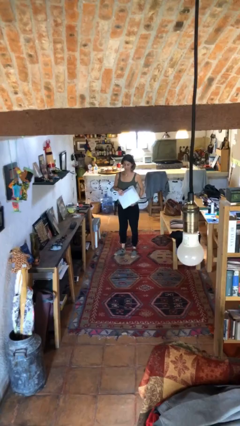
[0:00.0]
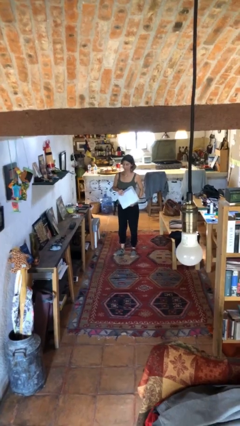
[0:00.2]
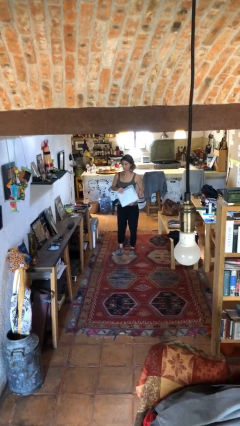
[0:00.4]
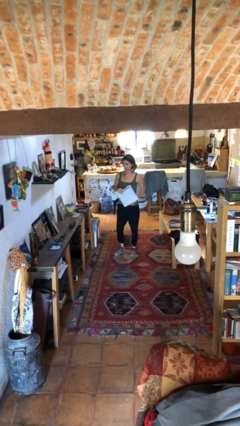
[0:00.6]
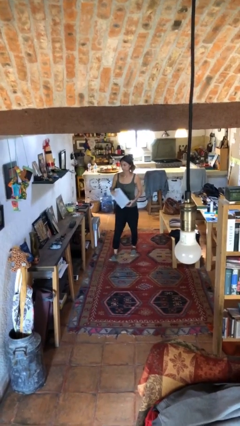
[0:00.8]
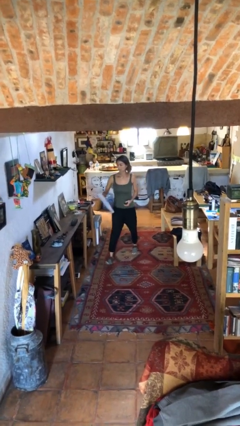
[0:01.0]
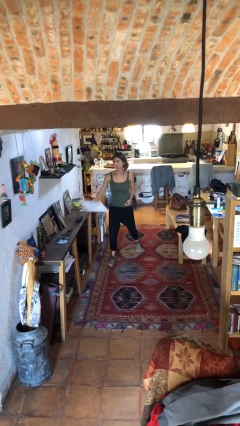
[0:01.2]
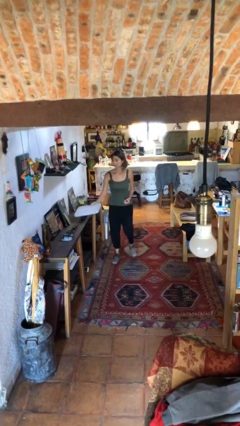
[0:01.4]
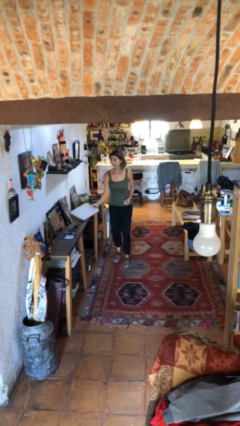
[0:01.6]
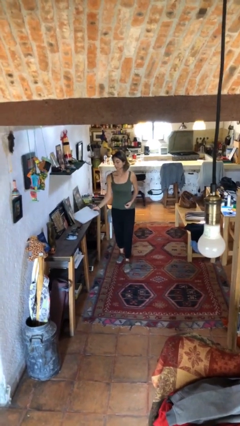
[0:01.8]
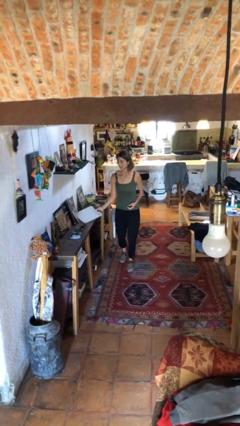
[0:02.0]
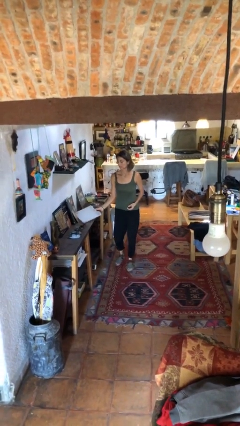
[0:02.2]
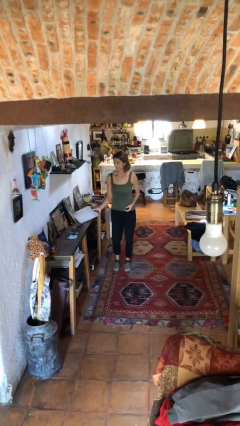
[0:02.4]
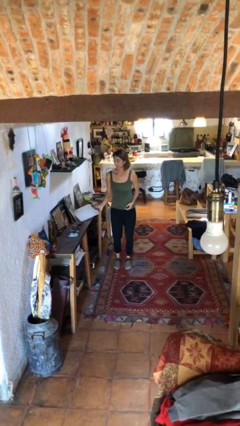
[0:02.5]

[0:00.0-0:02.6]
person puts down object on table

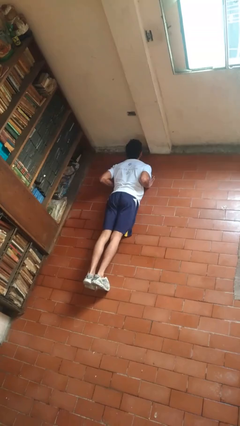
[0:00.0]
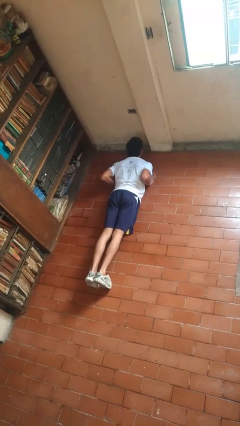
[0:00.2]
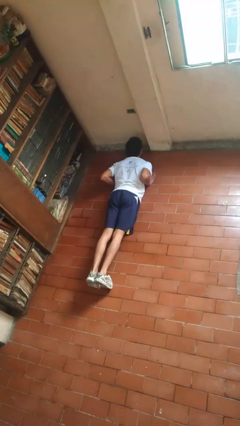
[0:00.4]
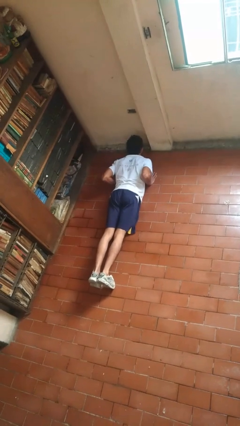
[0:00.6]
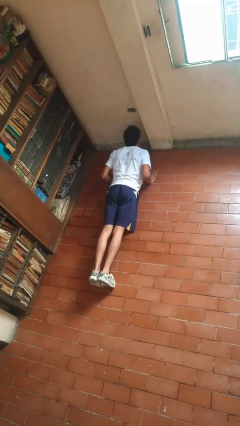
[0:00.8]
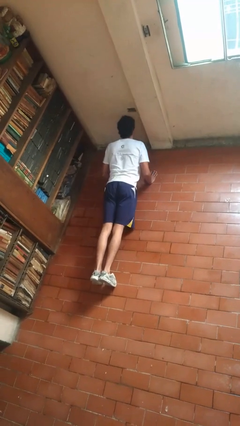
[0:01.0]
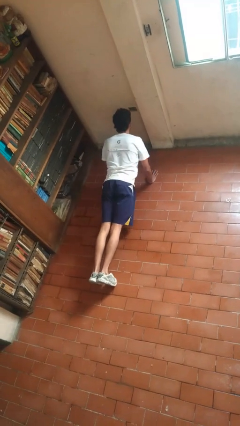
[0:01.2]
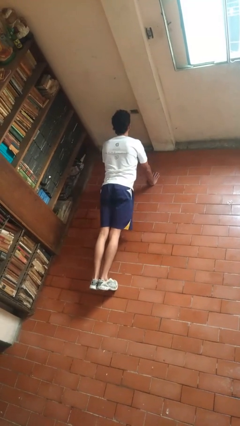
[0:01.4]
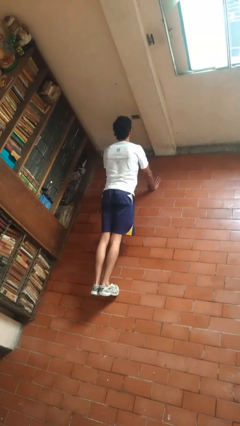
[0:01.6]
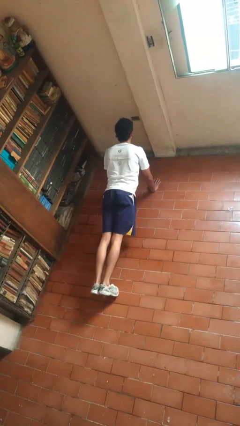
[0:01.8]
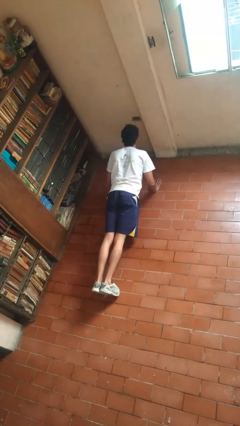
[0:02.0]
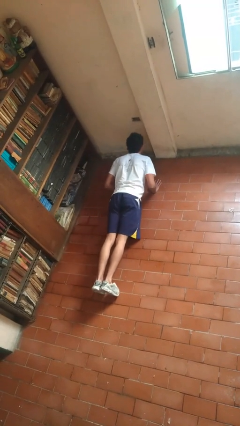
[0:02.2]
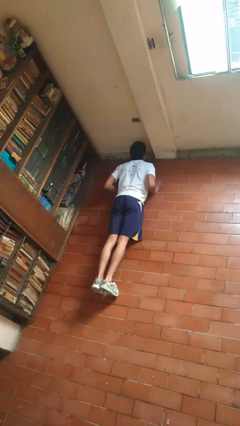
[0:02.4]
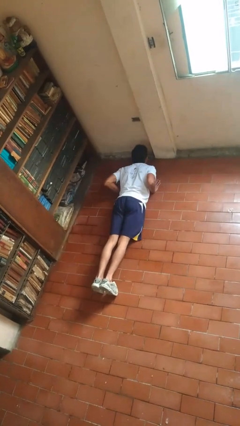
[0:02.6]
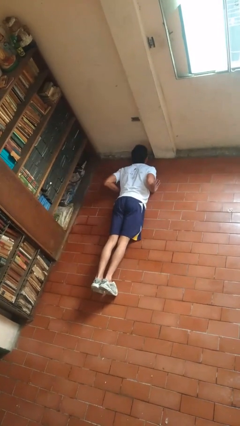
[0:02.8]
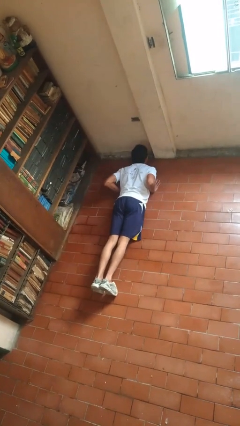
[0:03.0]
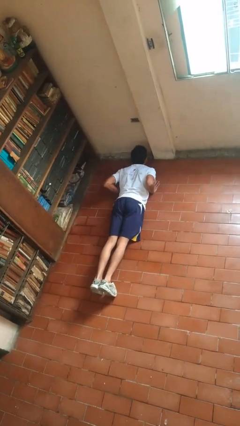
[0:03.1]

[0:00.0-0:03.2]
person exercises with pushup

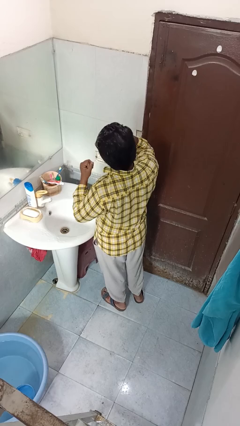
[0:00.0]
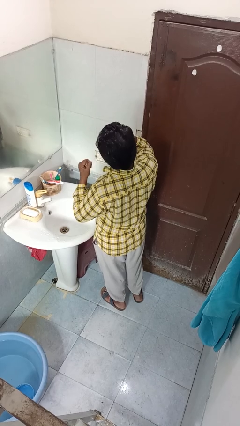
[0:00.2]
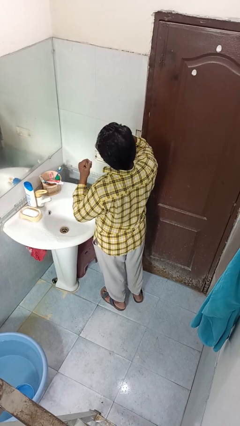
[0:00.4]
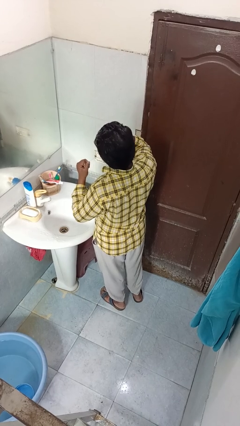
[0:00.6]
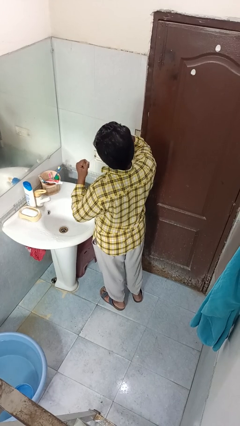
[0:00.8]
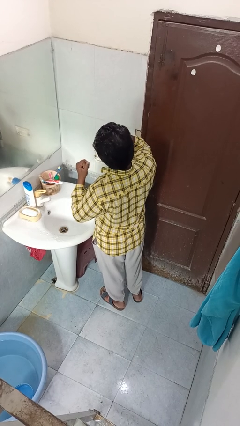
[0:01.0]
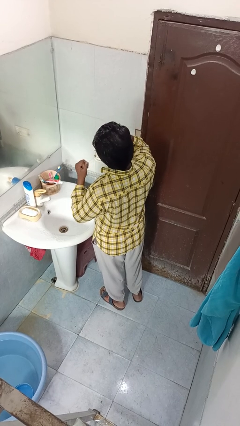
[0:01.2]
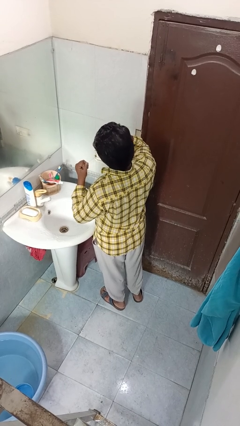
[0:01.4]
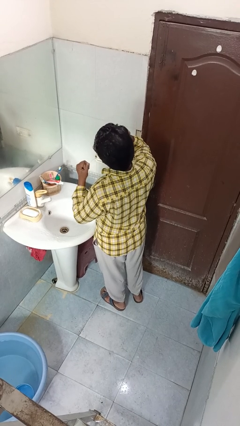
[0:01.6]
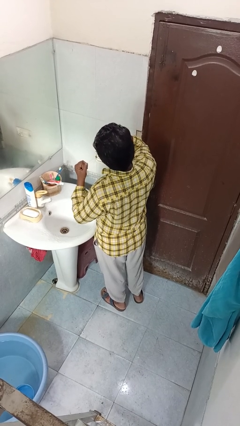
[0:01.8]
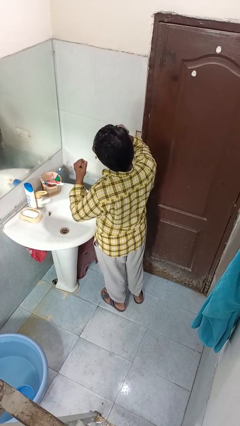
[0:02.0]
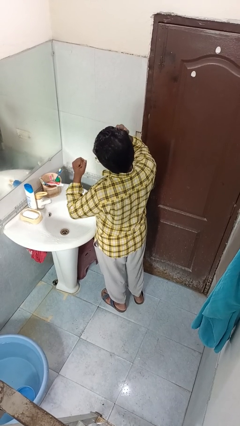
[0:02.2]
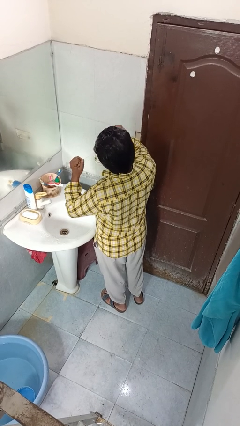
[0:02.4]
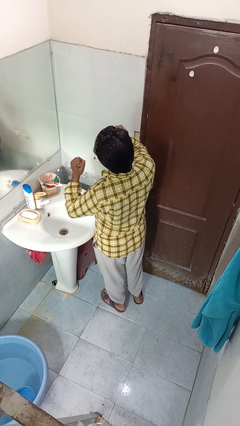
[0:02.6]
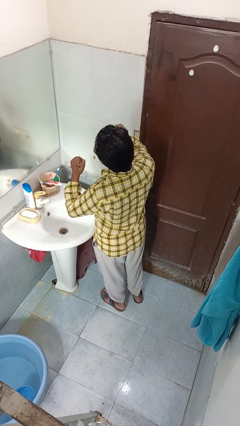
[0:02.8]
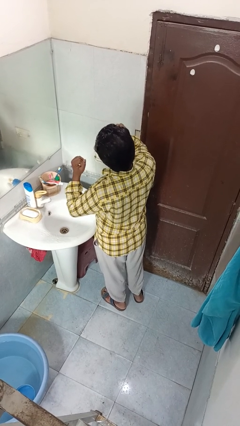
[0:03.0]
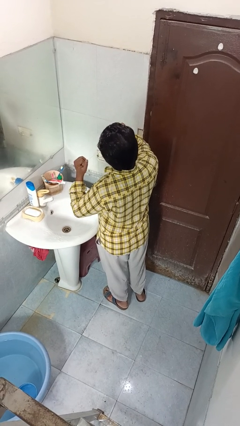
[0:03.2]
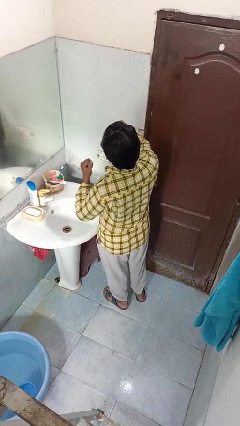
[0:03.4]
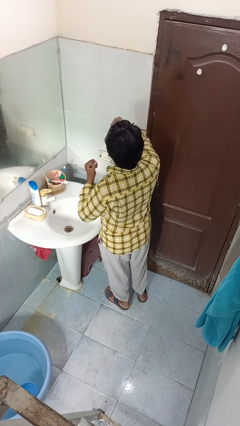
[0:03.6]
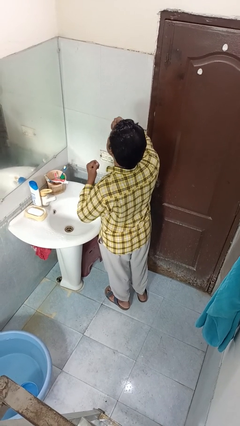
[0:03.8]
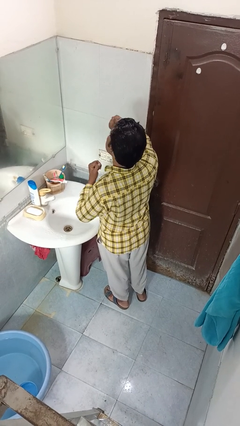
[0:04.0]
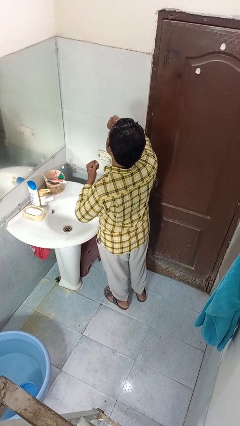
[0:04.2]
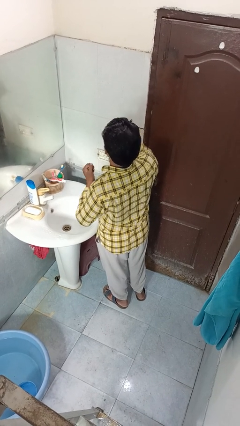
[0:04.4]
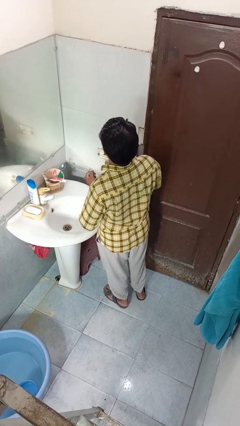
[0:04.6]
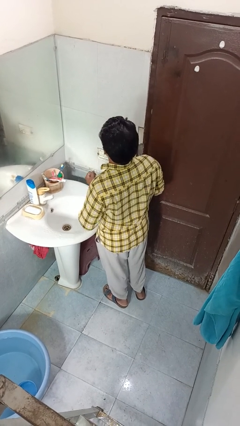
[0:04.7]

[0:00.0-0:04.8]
person flosses

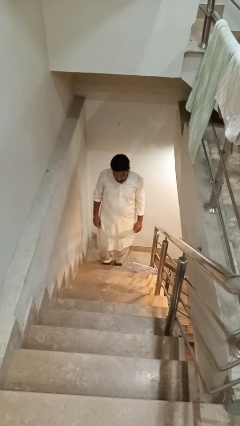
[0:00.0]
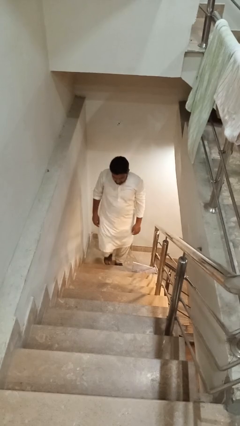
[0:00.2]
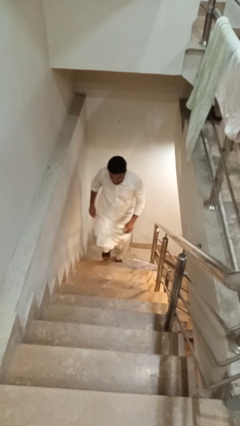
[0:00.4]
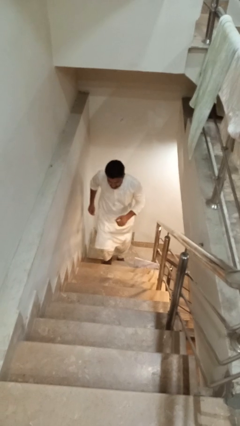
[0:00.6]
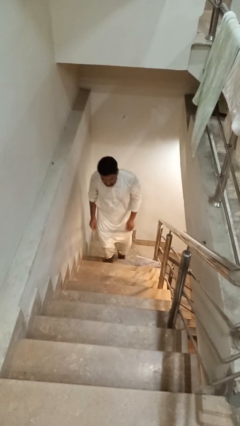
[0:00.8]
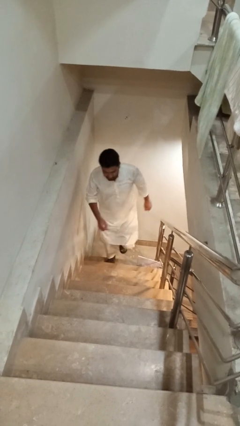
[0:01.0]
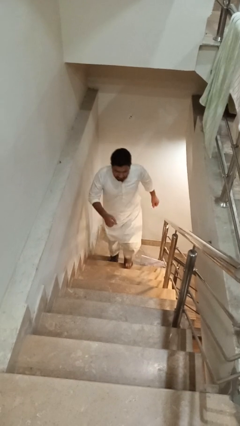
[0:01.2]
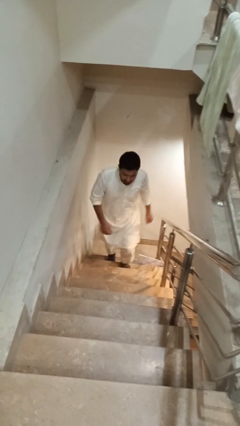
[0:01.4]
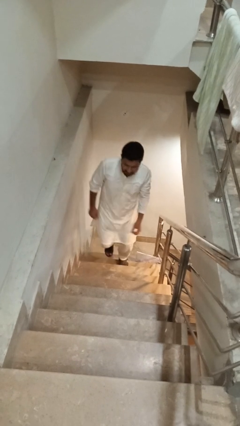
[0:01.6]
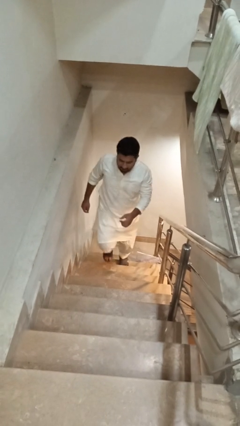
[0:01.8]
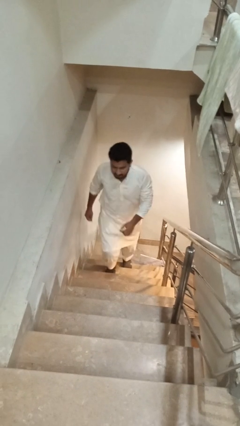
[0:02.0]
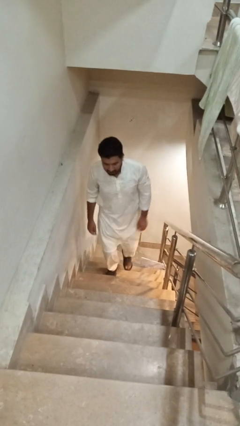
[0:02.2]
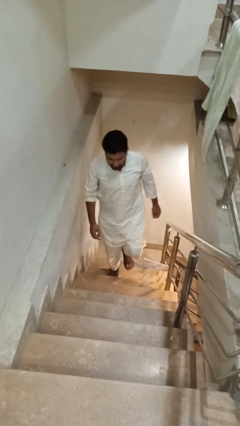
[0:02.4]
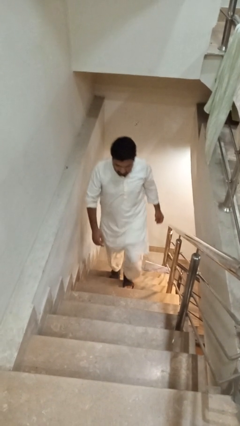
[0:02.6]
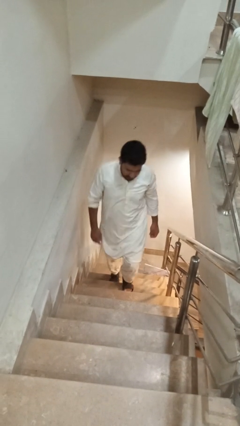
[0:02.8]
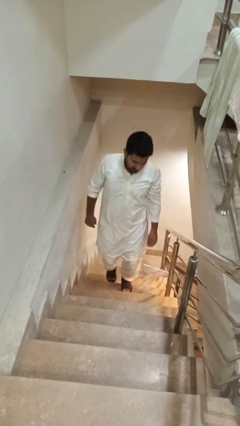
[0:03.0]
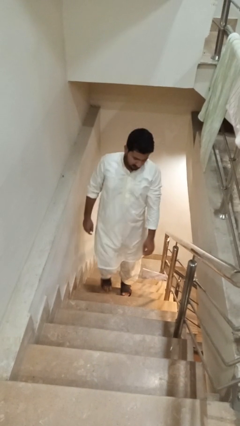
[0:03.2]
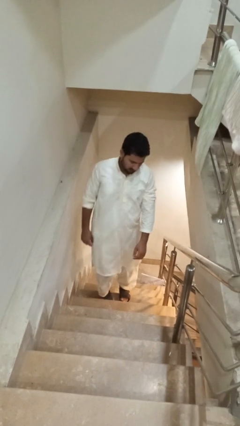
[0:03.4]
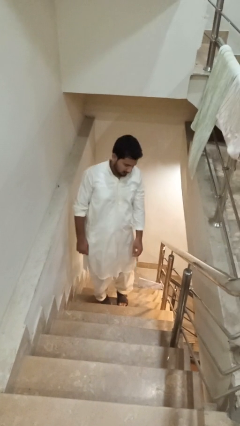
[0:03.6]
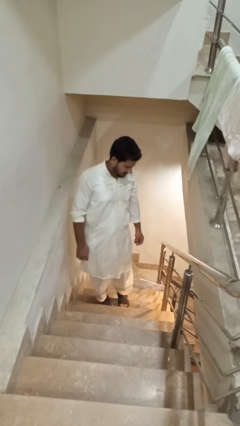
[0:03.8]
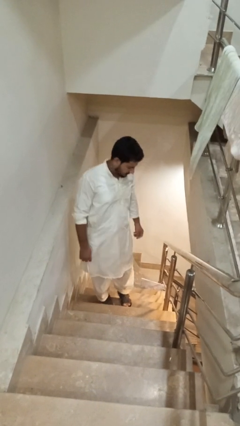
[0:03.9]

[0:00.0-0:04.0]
person climbs up stairs

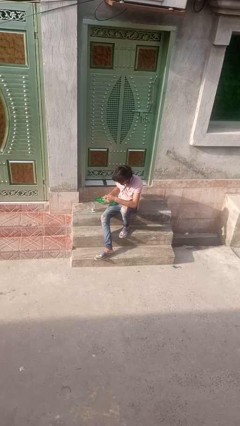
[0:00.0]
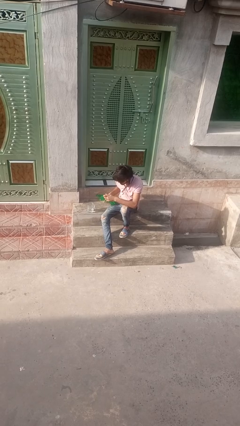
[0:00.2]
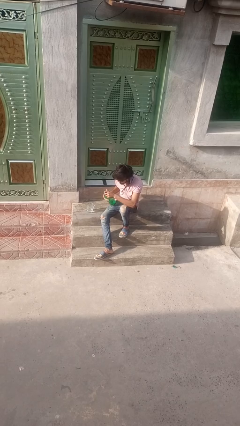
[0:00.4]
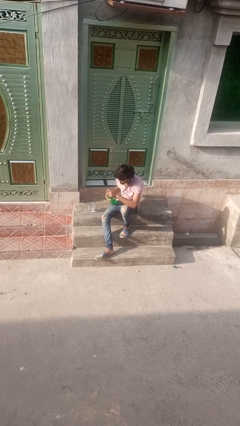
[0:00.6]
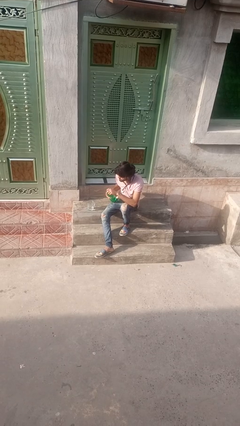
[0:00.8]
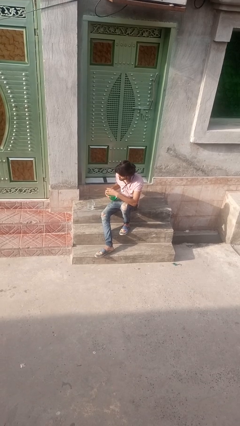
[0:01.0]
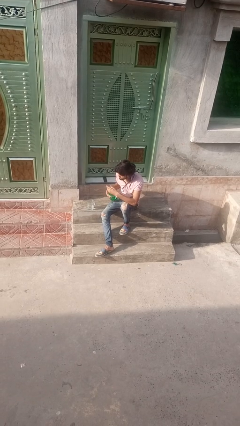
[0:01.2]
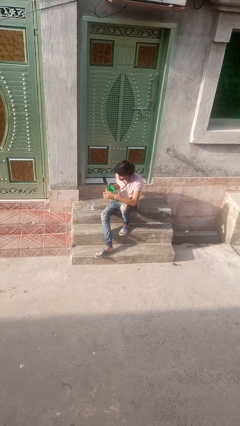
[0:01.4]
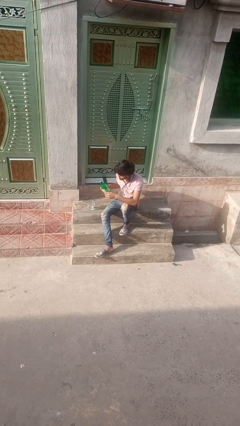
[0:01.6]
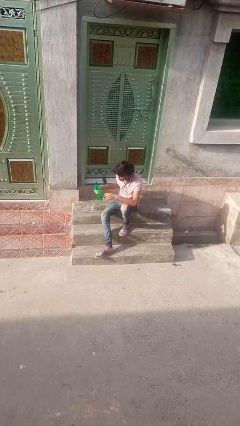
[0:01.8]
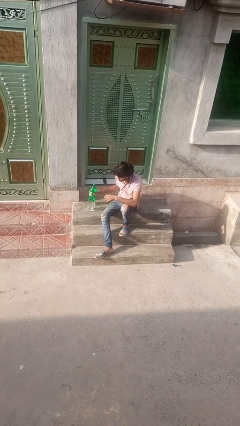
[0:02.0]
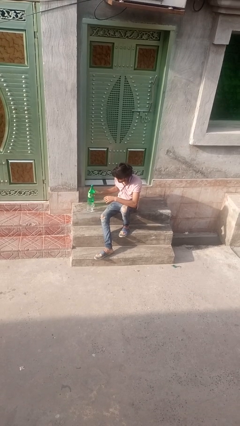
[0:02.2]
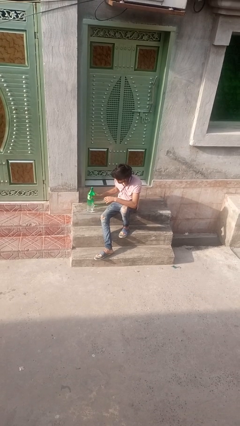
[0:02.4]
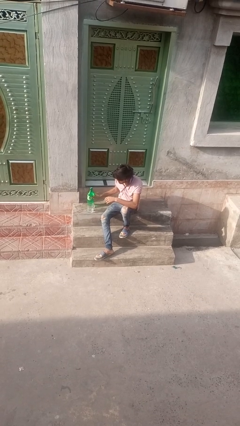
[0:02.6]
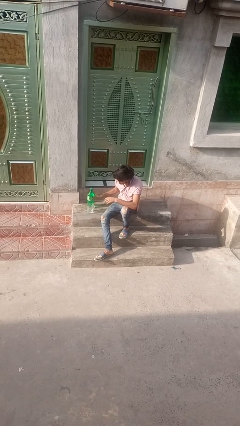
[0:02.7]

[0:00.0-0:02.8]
person screws lid to bottle

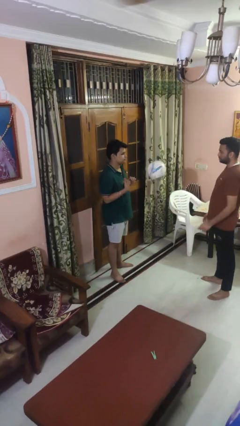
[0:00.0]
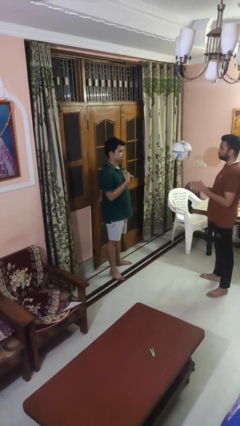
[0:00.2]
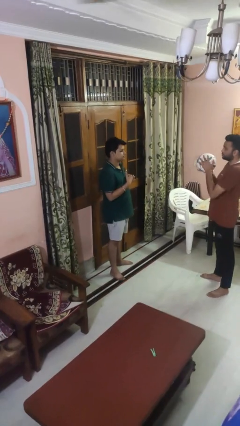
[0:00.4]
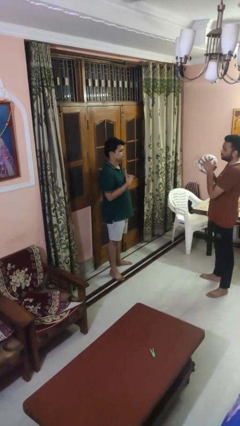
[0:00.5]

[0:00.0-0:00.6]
person throws object to person
